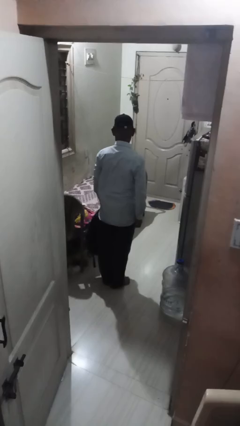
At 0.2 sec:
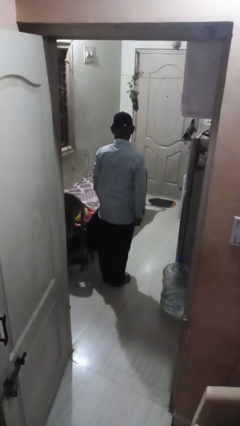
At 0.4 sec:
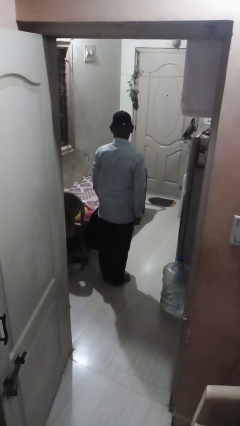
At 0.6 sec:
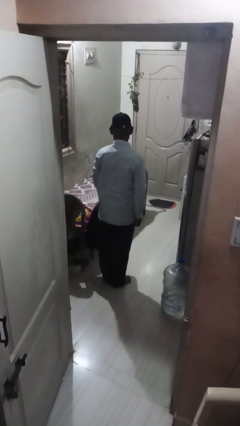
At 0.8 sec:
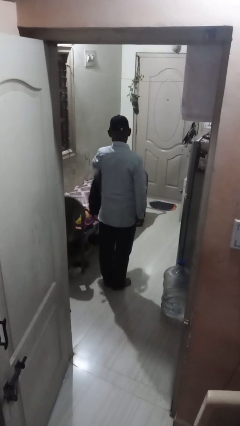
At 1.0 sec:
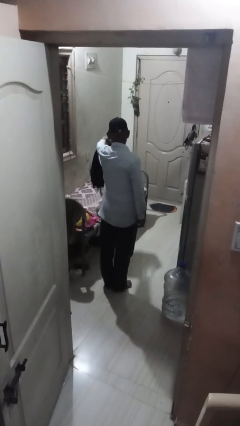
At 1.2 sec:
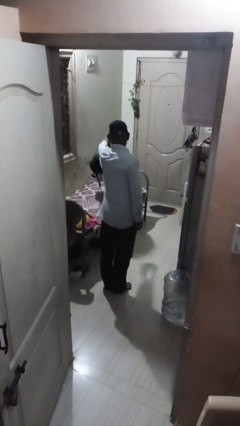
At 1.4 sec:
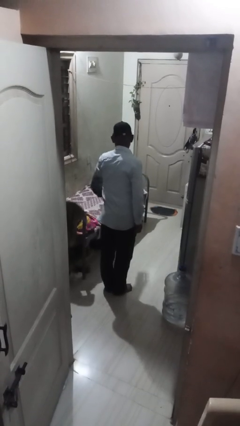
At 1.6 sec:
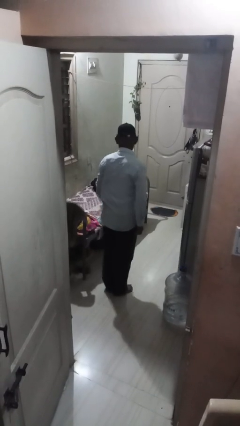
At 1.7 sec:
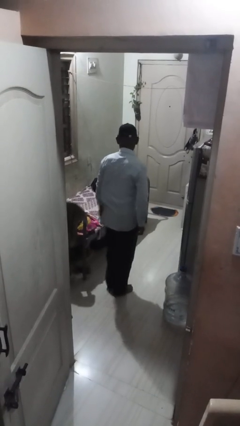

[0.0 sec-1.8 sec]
person throws object on bed

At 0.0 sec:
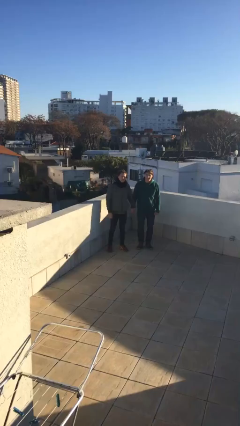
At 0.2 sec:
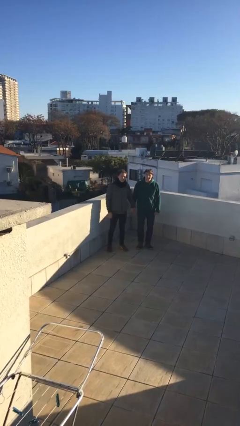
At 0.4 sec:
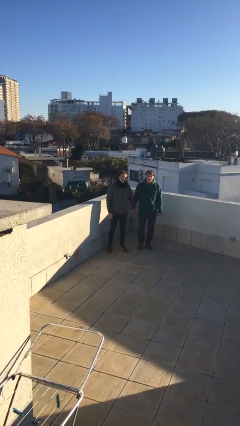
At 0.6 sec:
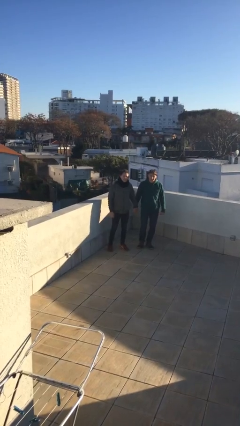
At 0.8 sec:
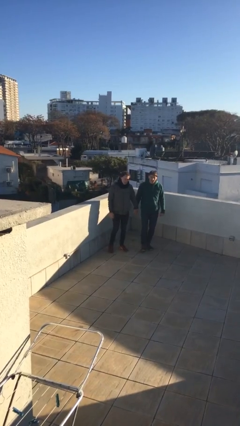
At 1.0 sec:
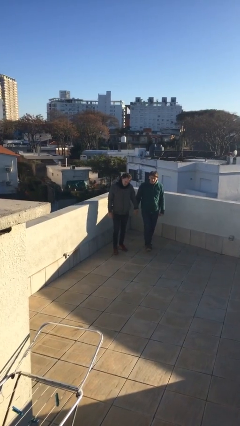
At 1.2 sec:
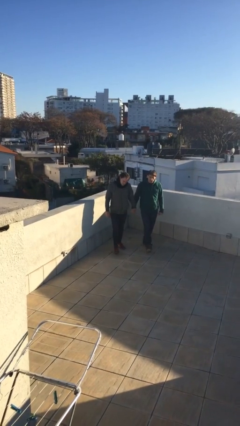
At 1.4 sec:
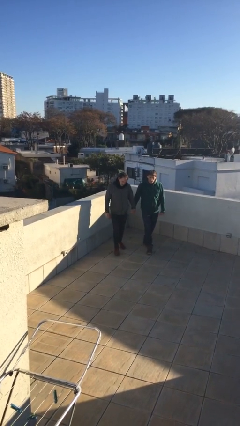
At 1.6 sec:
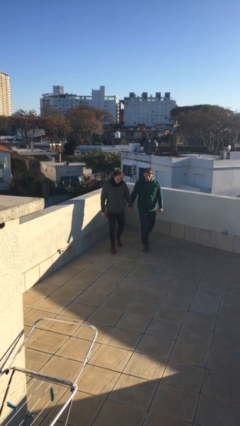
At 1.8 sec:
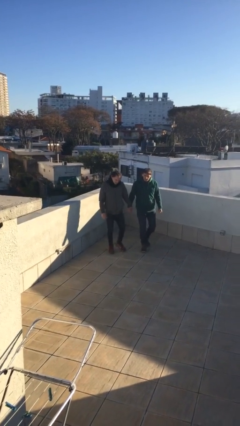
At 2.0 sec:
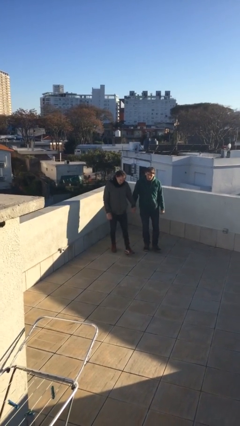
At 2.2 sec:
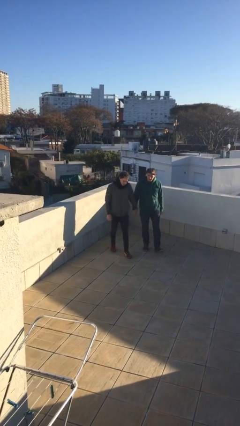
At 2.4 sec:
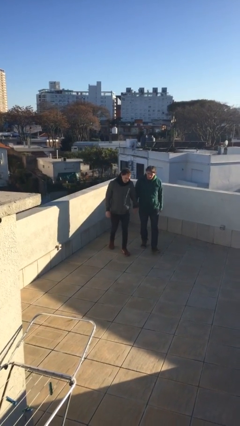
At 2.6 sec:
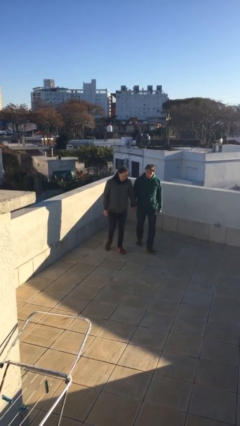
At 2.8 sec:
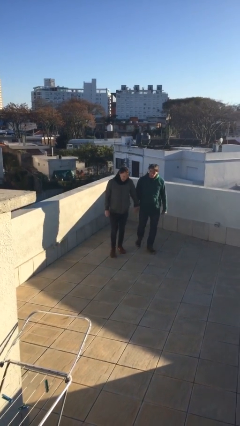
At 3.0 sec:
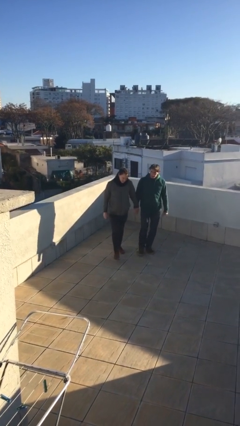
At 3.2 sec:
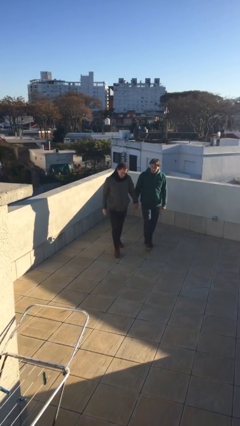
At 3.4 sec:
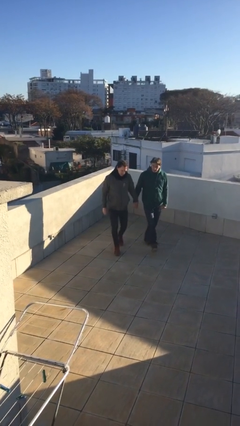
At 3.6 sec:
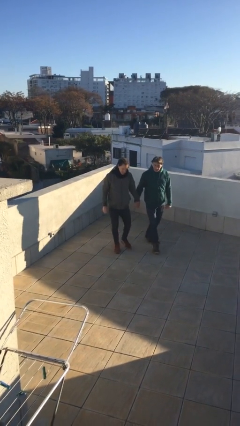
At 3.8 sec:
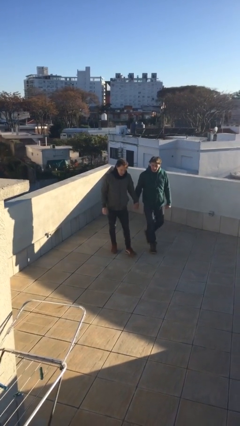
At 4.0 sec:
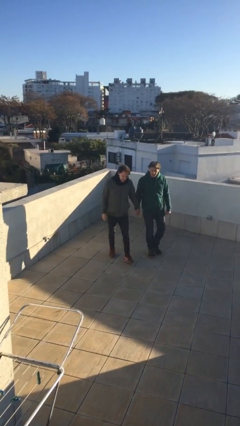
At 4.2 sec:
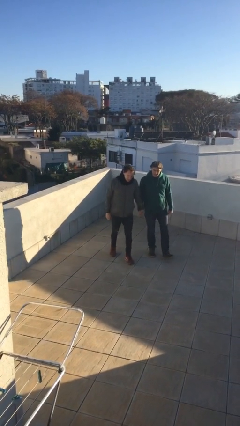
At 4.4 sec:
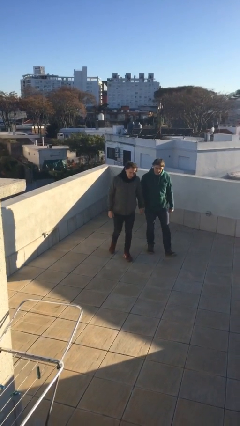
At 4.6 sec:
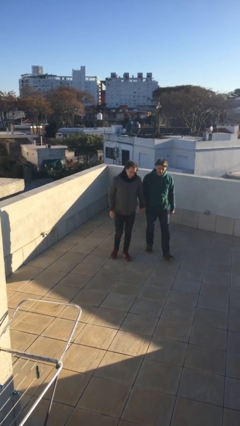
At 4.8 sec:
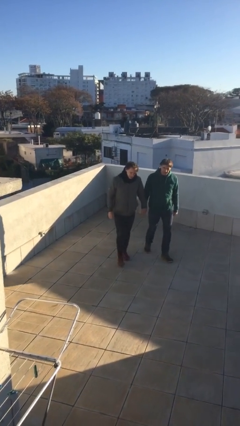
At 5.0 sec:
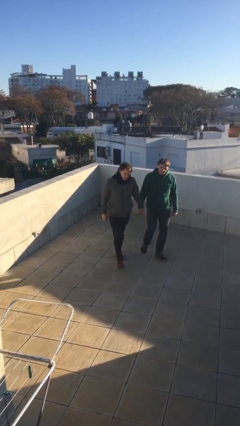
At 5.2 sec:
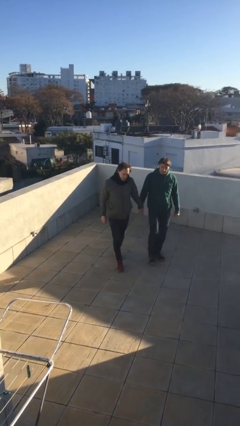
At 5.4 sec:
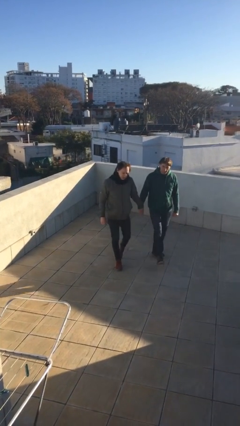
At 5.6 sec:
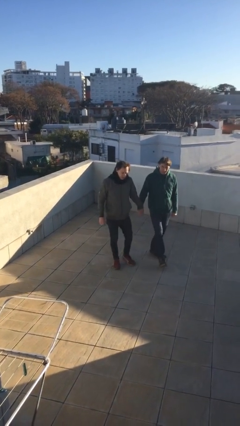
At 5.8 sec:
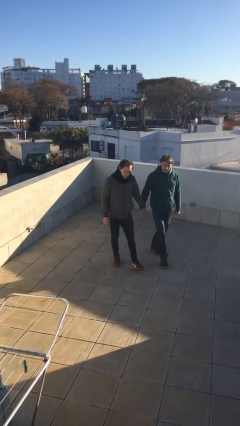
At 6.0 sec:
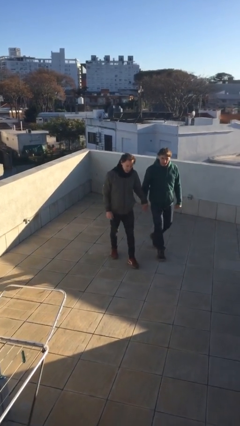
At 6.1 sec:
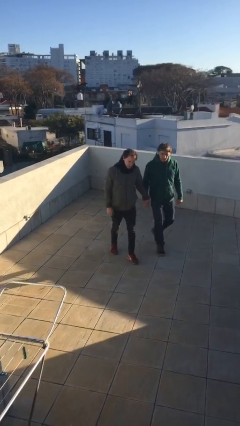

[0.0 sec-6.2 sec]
person holds hand

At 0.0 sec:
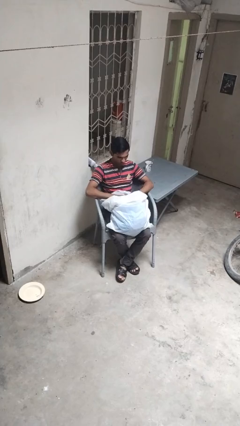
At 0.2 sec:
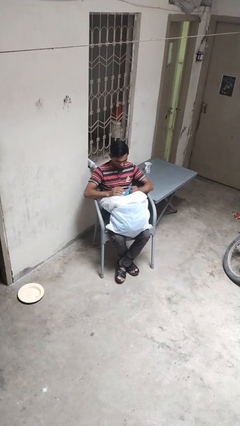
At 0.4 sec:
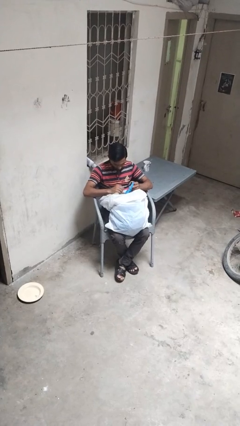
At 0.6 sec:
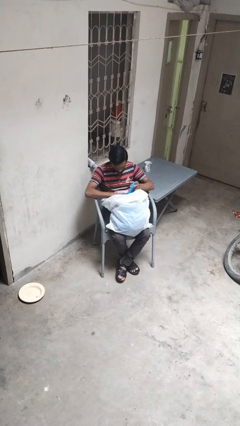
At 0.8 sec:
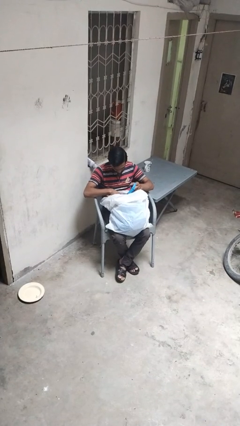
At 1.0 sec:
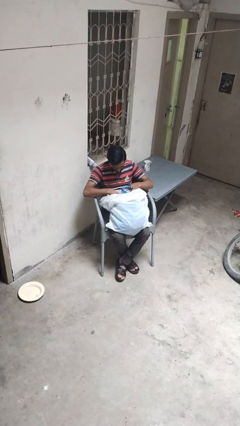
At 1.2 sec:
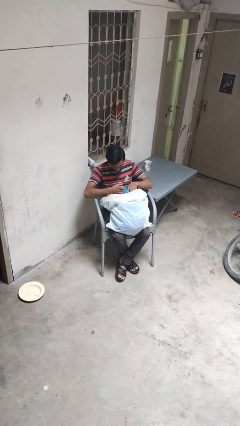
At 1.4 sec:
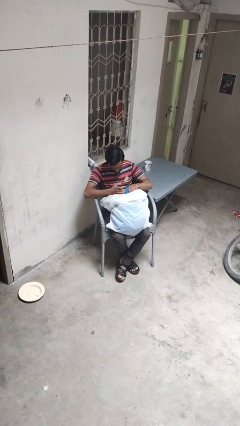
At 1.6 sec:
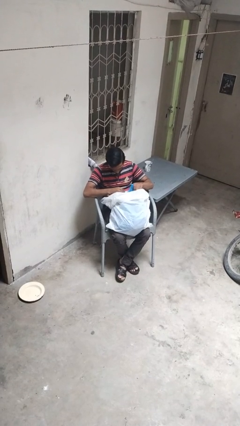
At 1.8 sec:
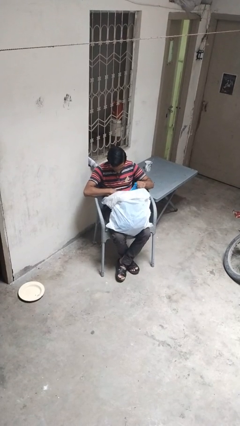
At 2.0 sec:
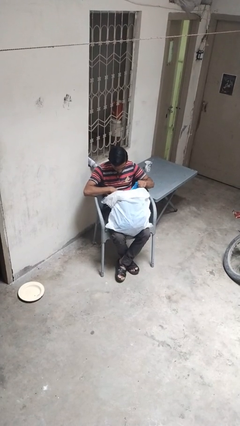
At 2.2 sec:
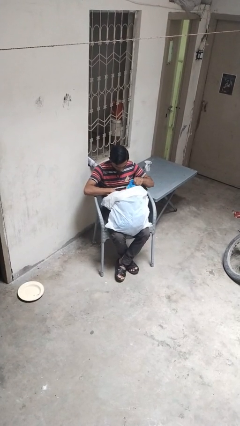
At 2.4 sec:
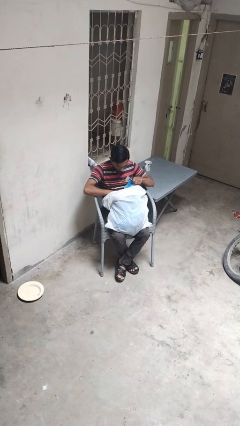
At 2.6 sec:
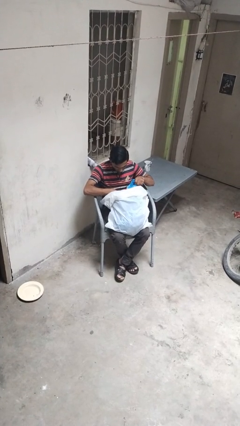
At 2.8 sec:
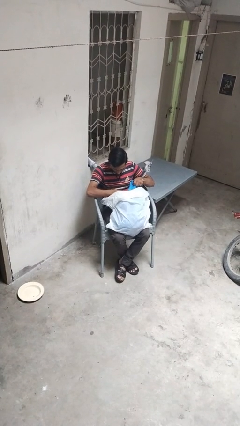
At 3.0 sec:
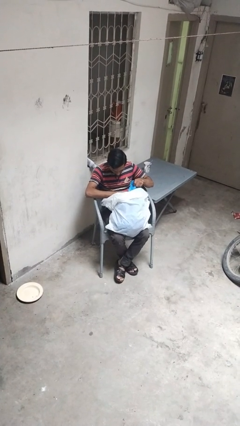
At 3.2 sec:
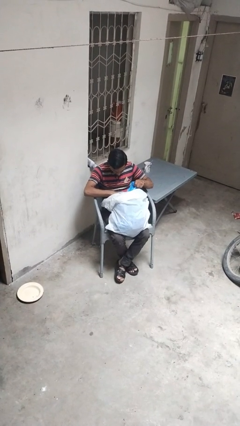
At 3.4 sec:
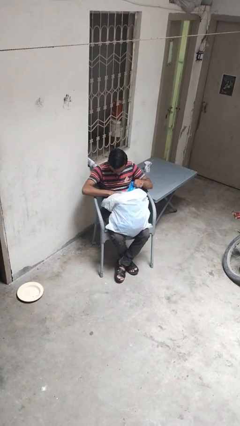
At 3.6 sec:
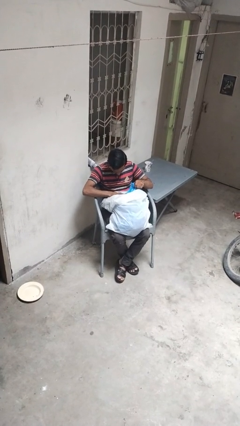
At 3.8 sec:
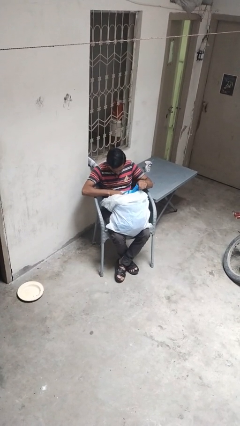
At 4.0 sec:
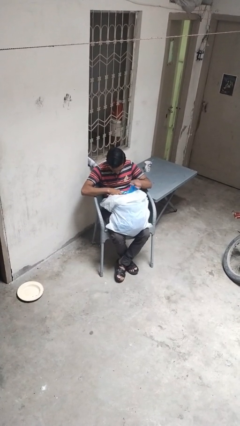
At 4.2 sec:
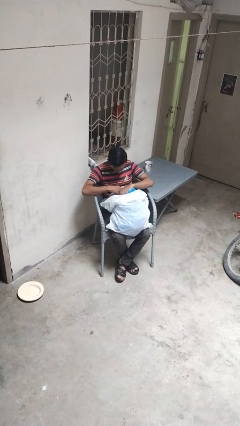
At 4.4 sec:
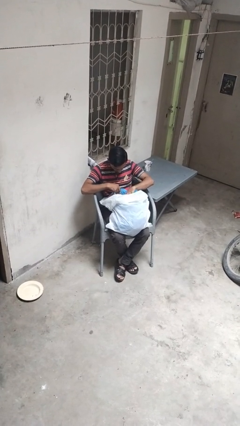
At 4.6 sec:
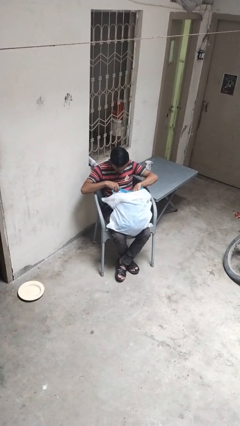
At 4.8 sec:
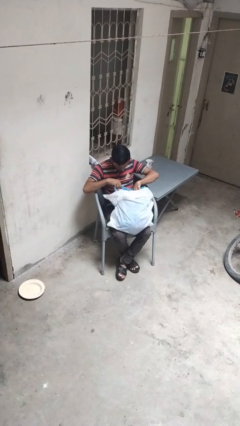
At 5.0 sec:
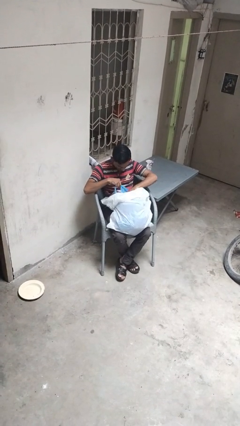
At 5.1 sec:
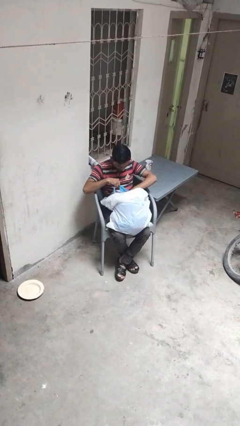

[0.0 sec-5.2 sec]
person searches in bag

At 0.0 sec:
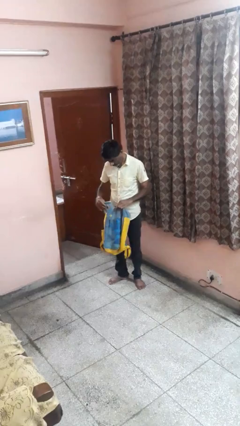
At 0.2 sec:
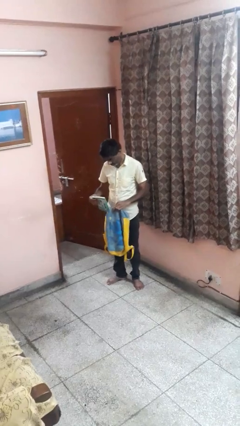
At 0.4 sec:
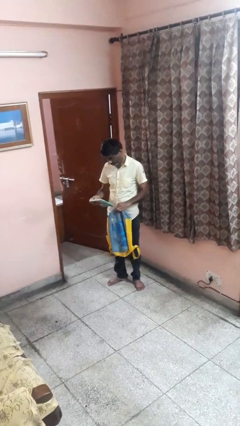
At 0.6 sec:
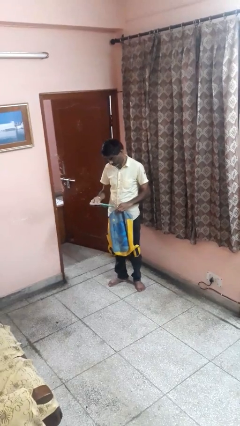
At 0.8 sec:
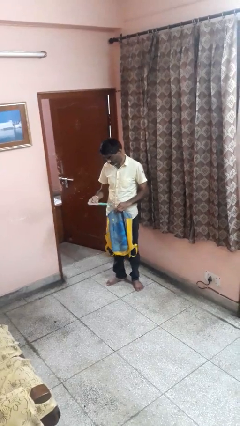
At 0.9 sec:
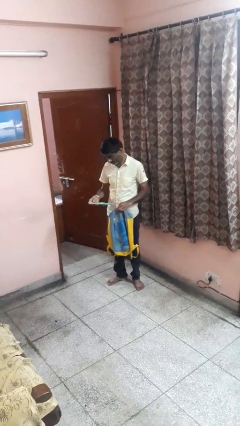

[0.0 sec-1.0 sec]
person takes object from backpack

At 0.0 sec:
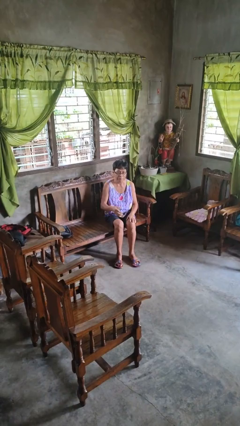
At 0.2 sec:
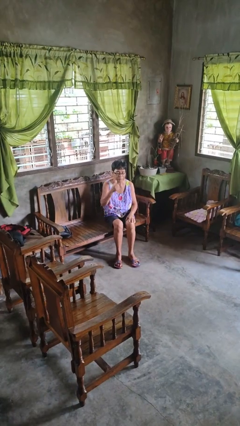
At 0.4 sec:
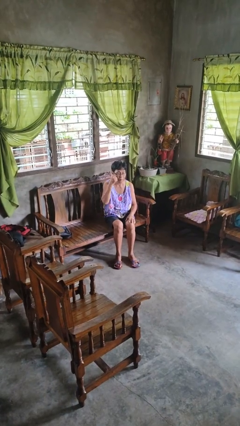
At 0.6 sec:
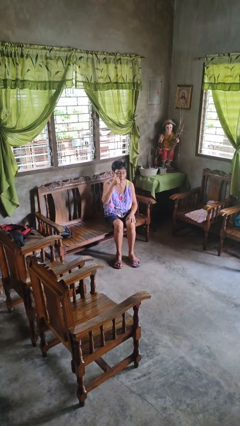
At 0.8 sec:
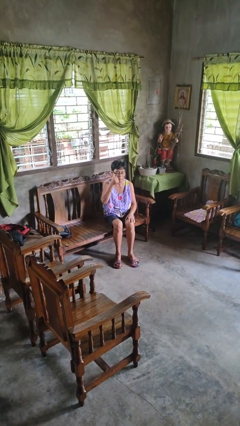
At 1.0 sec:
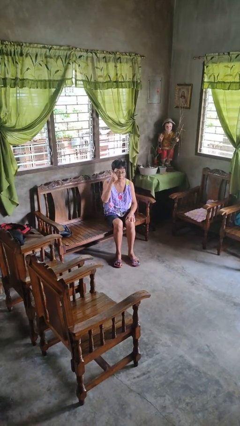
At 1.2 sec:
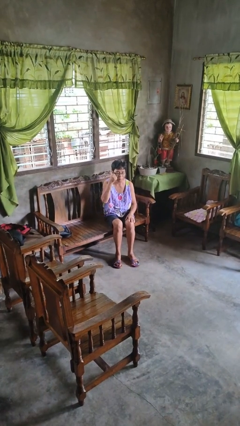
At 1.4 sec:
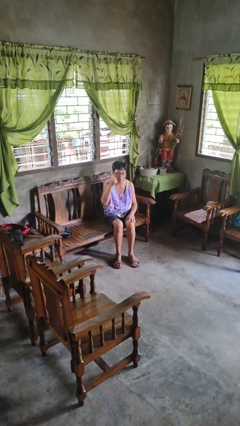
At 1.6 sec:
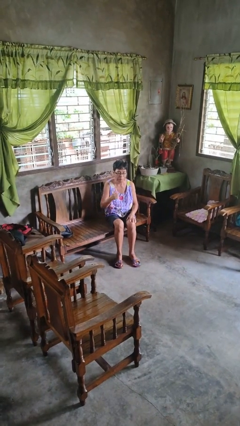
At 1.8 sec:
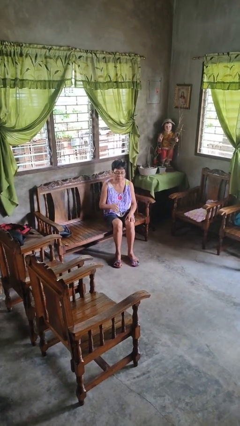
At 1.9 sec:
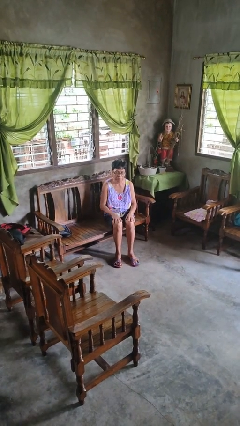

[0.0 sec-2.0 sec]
person gestures behind me

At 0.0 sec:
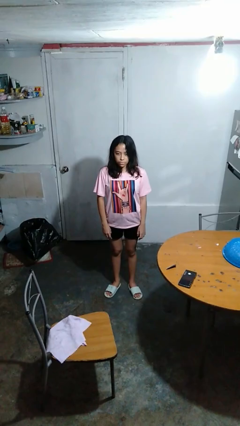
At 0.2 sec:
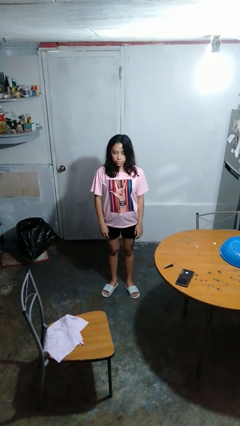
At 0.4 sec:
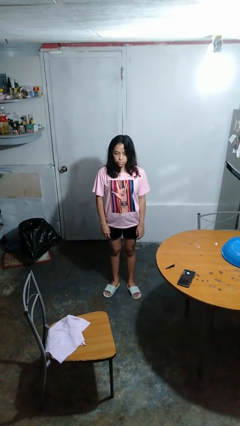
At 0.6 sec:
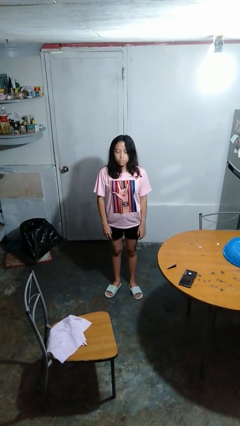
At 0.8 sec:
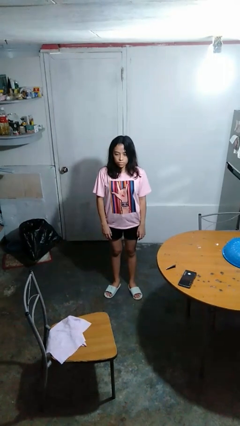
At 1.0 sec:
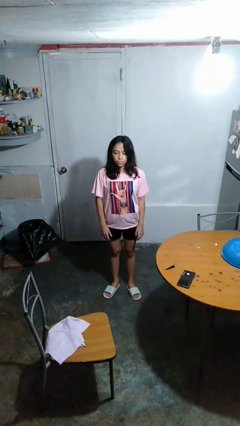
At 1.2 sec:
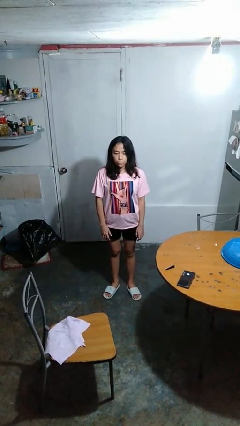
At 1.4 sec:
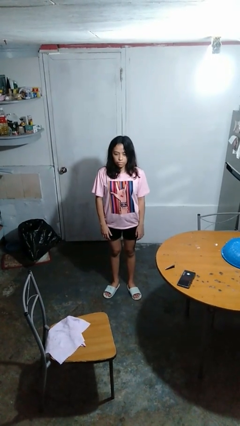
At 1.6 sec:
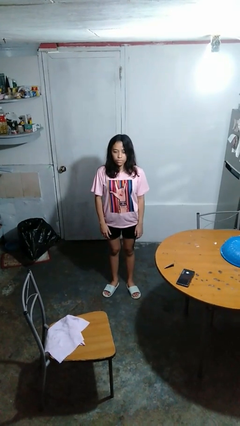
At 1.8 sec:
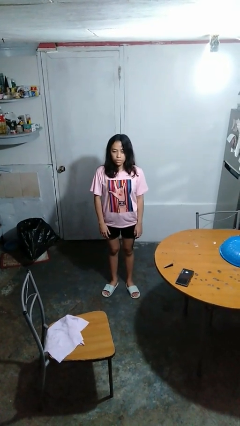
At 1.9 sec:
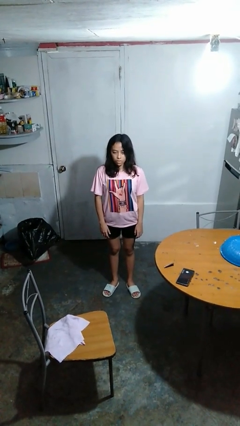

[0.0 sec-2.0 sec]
person nods head
